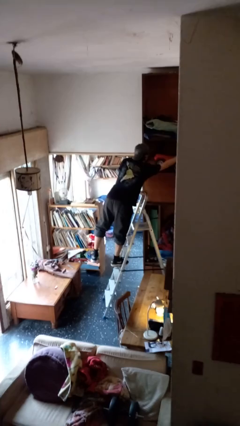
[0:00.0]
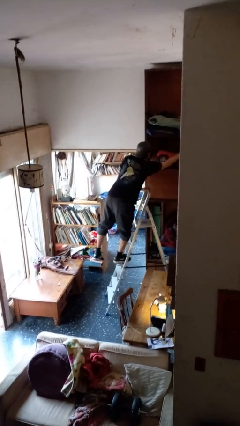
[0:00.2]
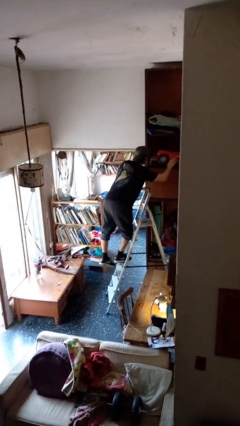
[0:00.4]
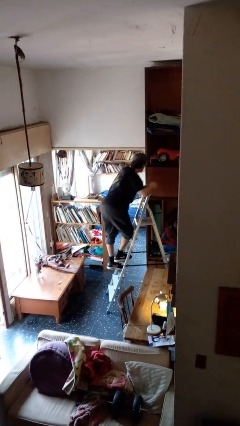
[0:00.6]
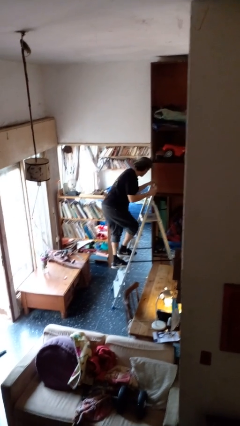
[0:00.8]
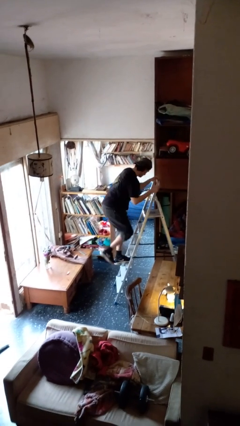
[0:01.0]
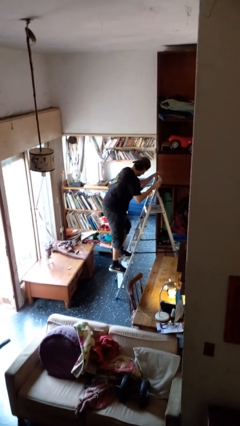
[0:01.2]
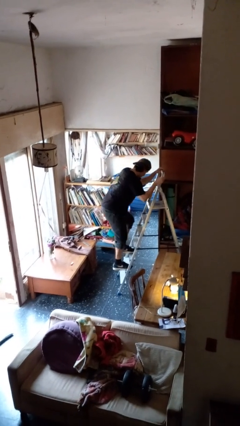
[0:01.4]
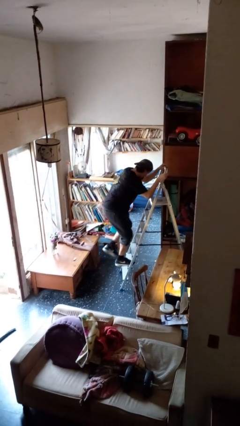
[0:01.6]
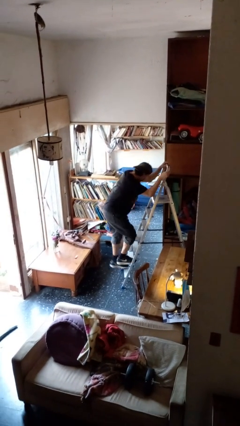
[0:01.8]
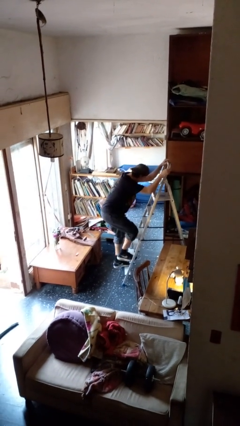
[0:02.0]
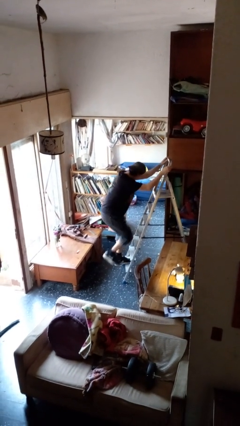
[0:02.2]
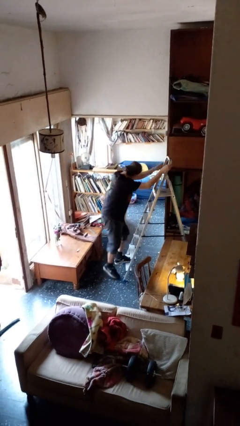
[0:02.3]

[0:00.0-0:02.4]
person climbs down ladder

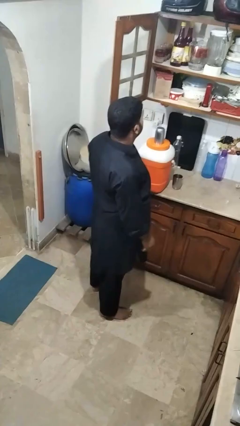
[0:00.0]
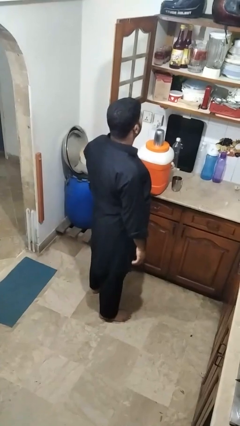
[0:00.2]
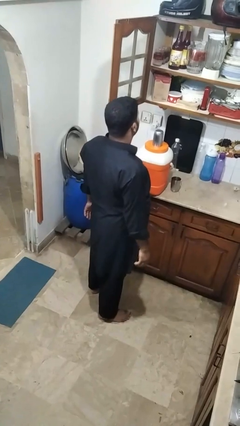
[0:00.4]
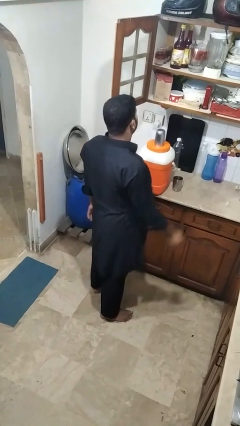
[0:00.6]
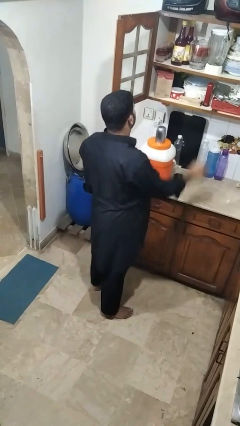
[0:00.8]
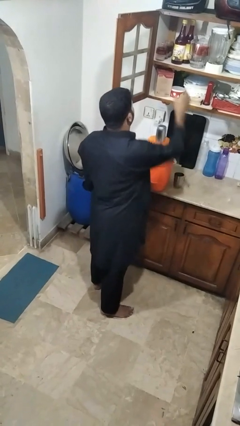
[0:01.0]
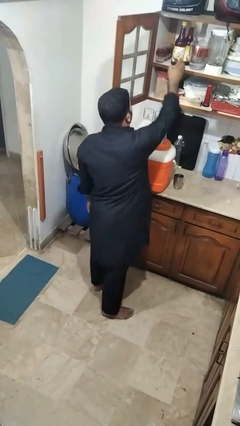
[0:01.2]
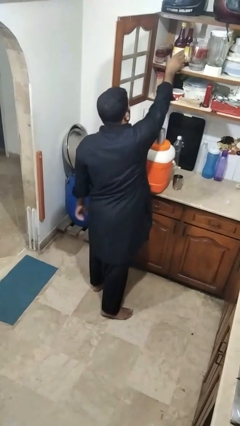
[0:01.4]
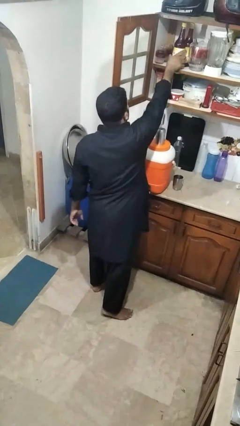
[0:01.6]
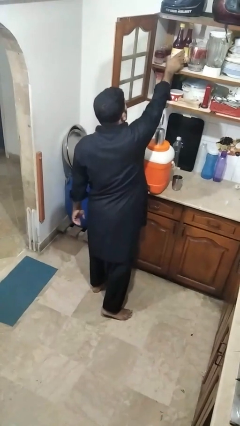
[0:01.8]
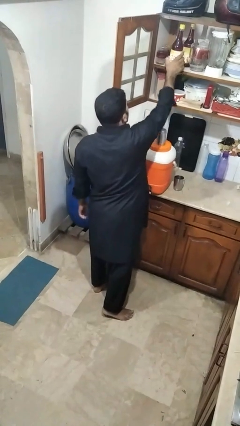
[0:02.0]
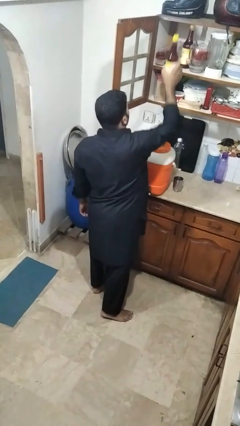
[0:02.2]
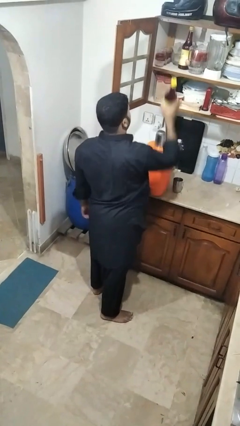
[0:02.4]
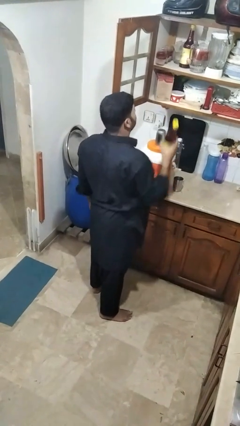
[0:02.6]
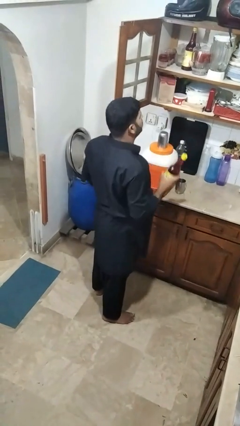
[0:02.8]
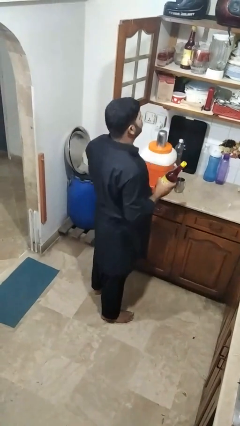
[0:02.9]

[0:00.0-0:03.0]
person picks up object from cabinet

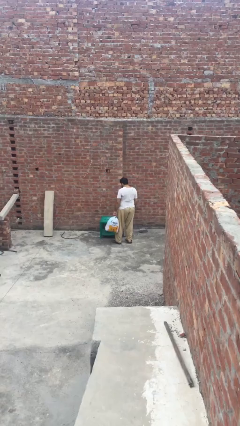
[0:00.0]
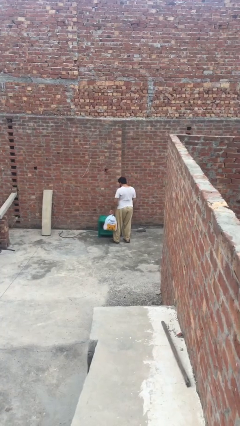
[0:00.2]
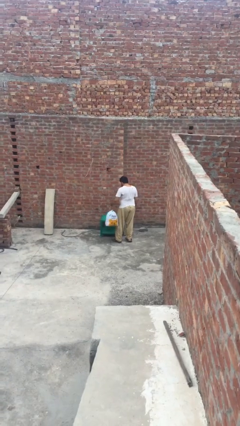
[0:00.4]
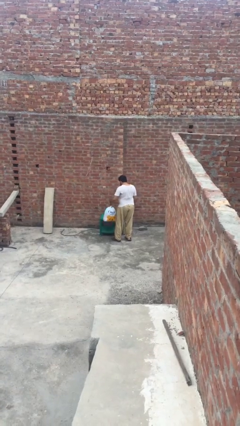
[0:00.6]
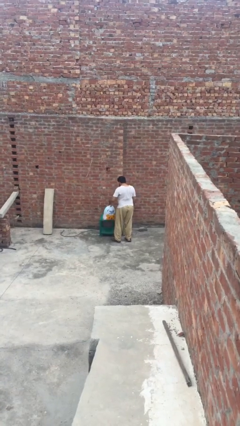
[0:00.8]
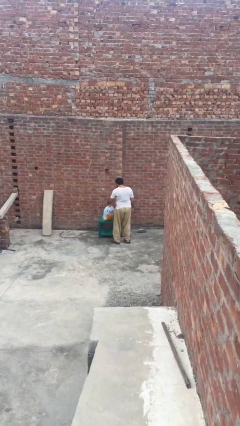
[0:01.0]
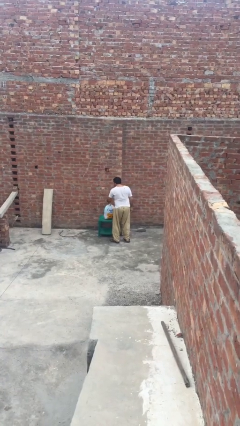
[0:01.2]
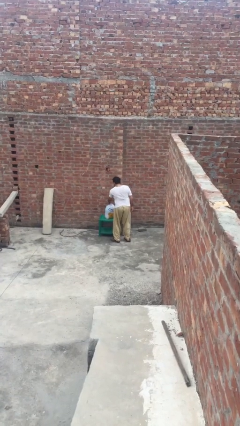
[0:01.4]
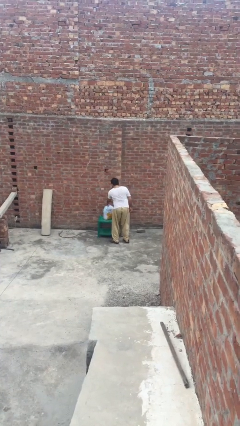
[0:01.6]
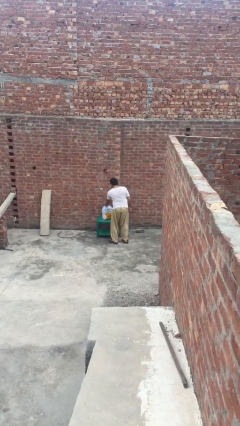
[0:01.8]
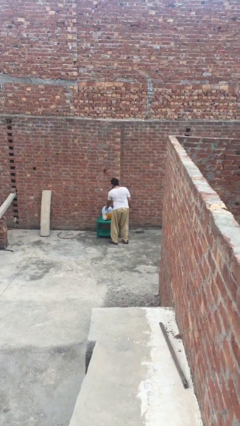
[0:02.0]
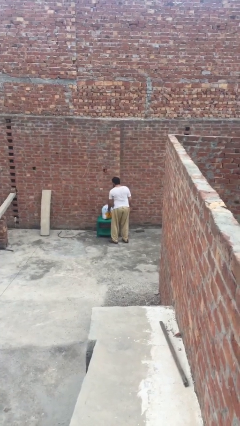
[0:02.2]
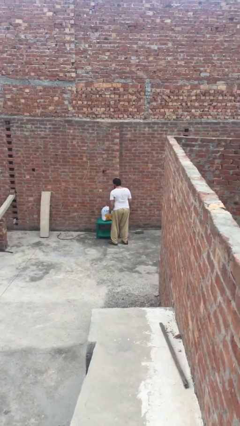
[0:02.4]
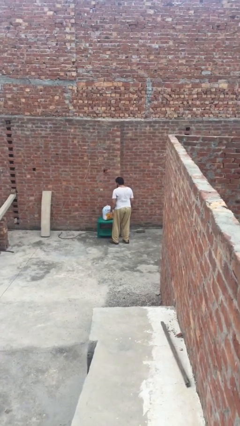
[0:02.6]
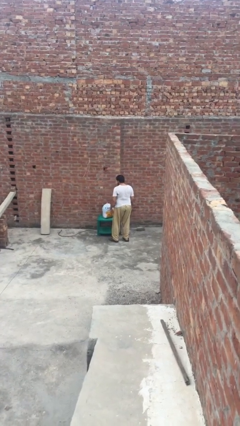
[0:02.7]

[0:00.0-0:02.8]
person puts down object on table

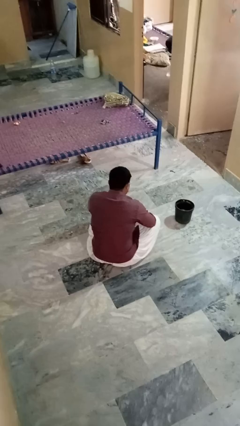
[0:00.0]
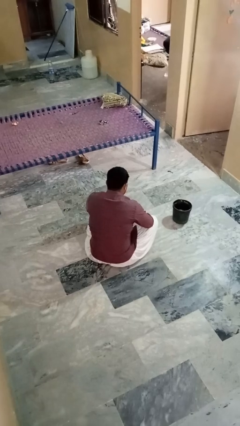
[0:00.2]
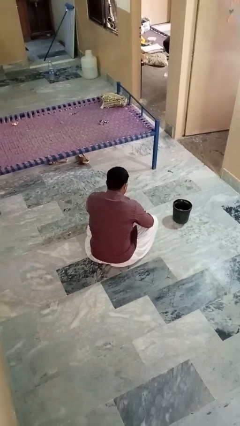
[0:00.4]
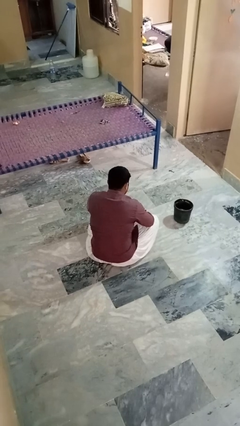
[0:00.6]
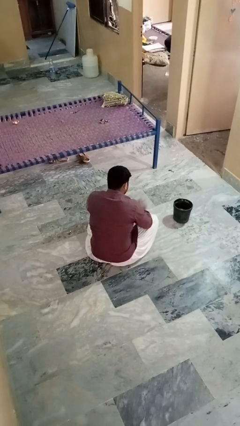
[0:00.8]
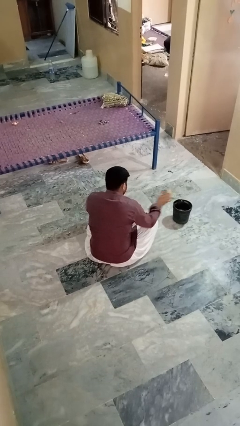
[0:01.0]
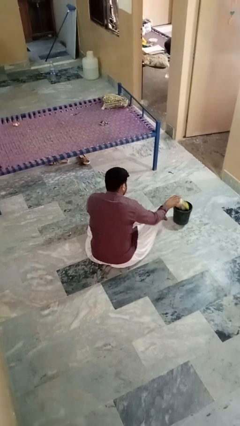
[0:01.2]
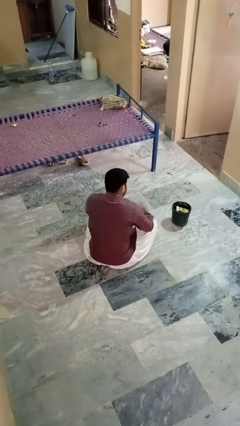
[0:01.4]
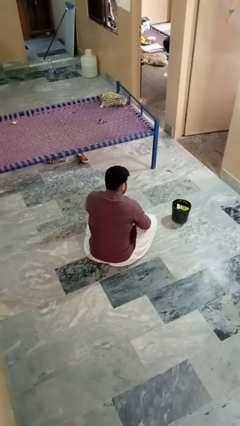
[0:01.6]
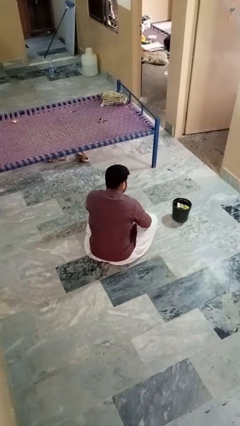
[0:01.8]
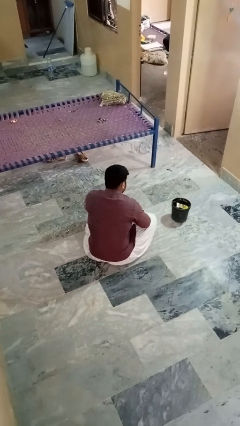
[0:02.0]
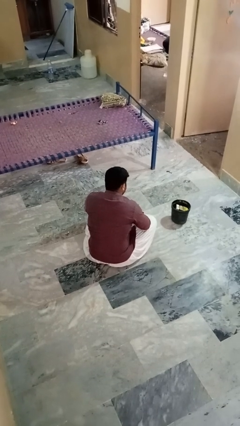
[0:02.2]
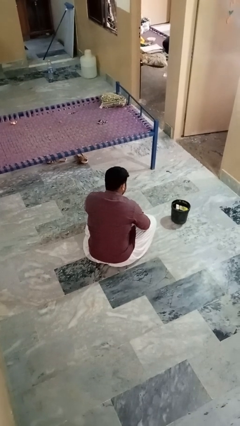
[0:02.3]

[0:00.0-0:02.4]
person puts object into basket

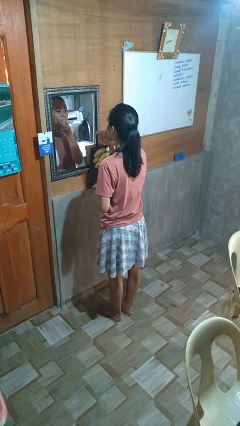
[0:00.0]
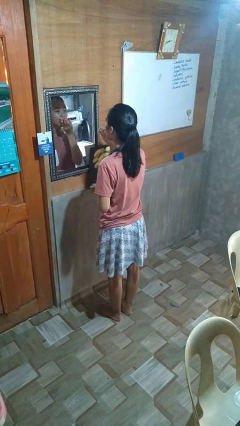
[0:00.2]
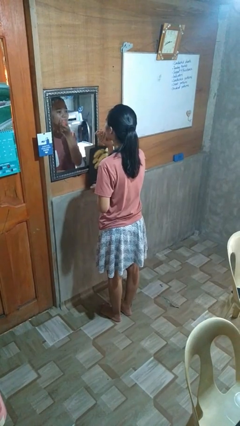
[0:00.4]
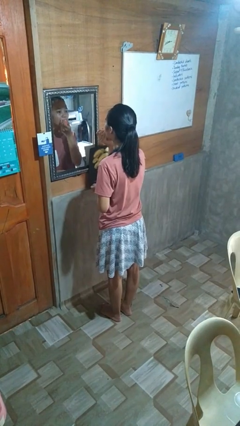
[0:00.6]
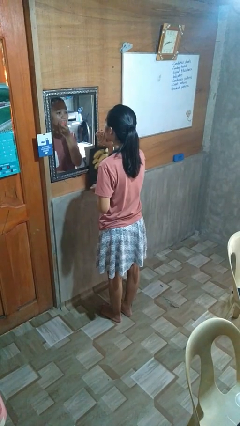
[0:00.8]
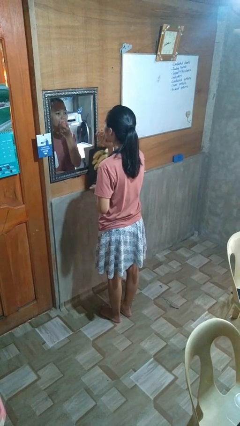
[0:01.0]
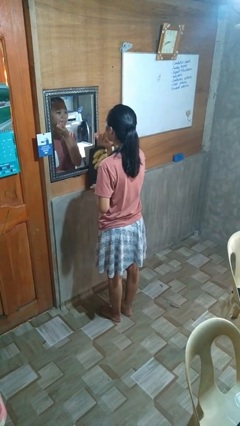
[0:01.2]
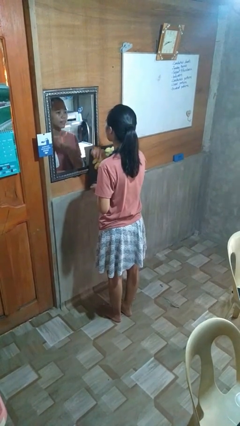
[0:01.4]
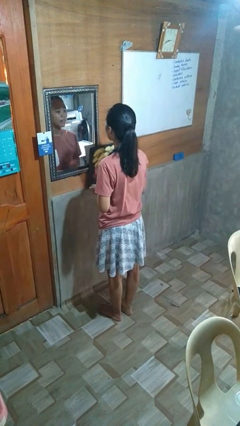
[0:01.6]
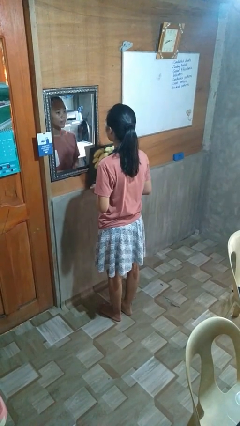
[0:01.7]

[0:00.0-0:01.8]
person applies lip makeup

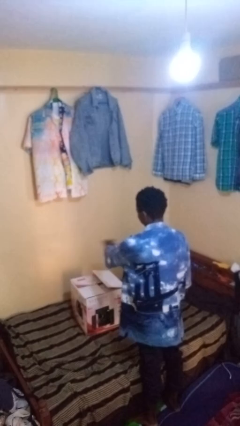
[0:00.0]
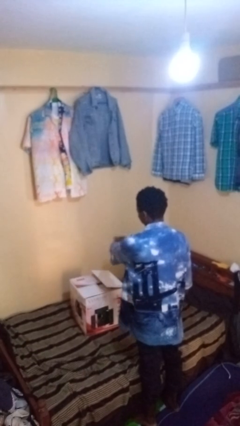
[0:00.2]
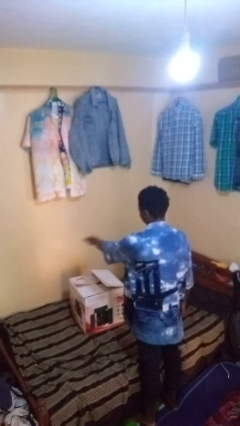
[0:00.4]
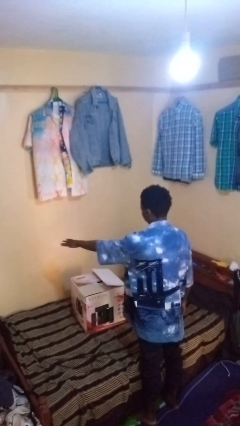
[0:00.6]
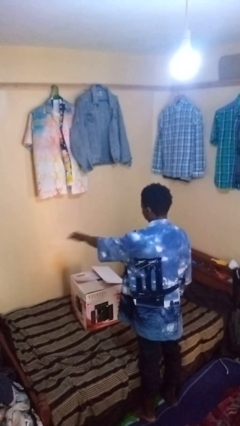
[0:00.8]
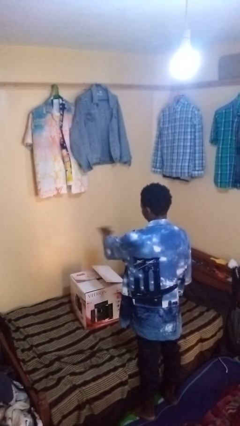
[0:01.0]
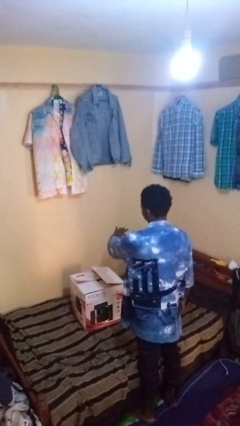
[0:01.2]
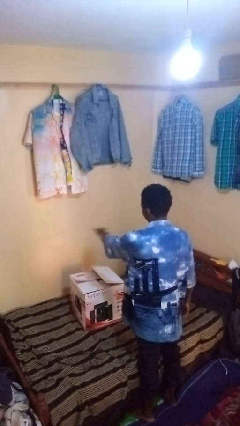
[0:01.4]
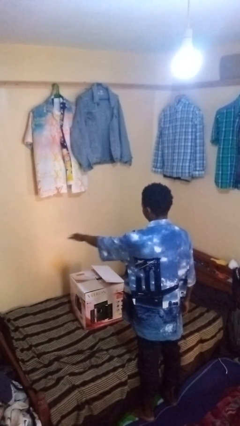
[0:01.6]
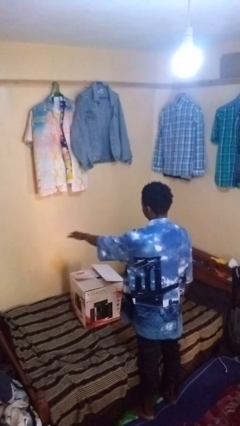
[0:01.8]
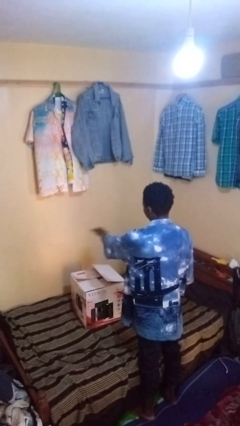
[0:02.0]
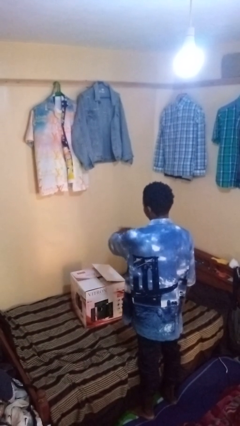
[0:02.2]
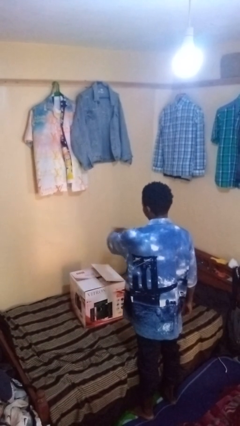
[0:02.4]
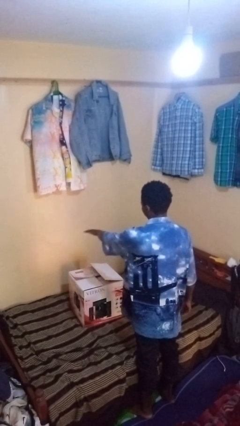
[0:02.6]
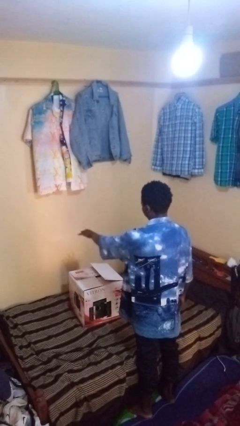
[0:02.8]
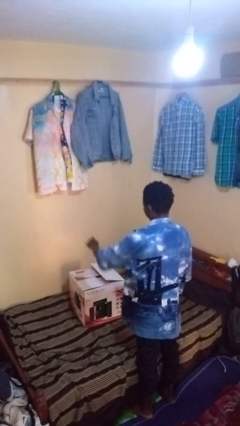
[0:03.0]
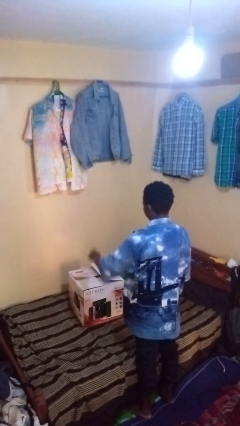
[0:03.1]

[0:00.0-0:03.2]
person waves hand over object

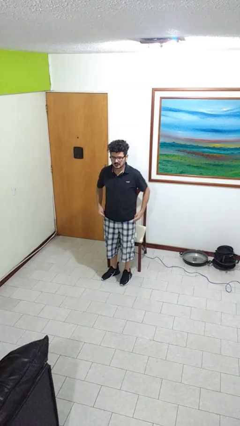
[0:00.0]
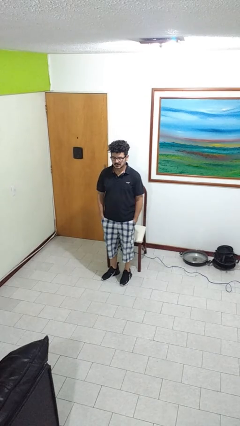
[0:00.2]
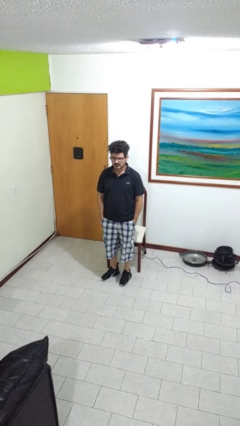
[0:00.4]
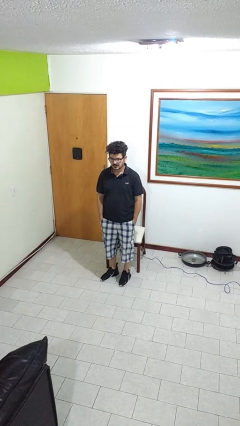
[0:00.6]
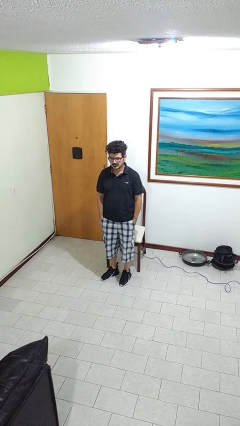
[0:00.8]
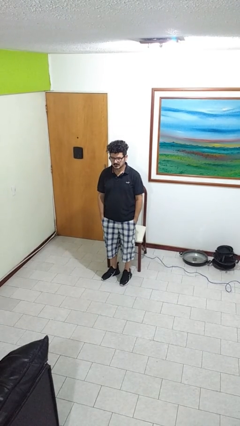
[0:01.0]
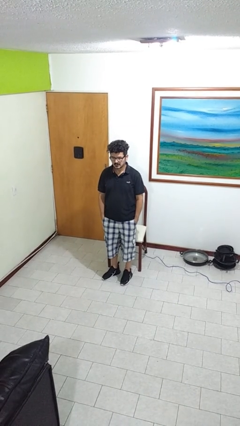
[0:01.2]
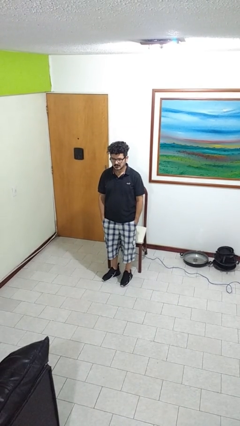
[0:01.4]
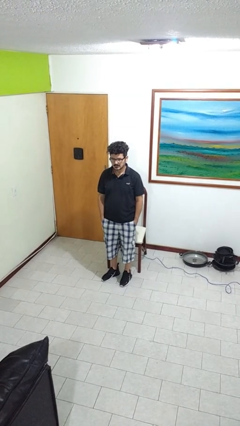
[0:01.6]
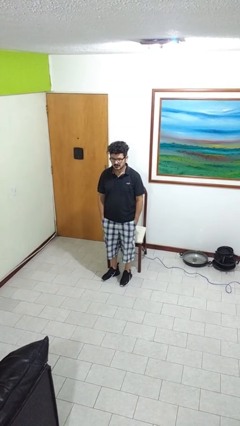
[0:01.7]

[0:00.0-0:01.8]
person puts hands in back pockets
